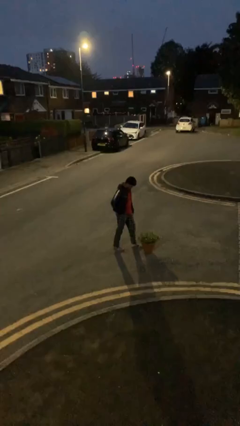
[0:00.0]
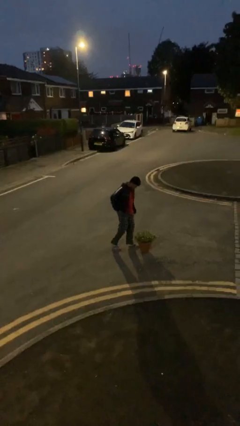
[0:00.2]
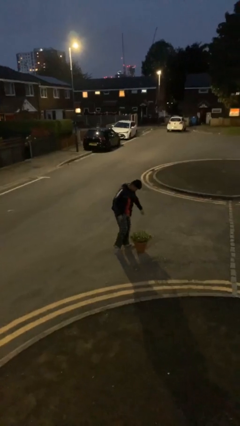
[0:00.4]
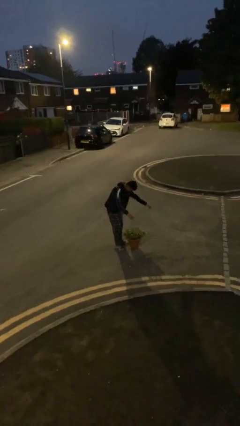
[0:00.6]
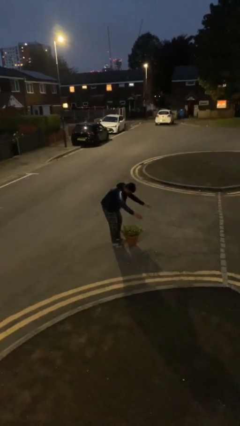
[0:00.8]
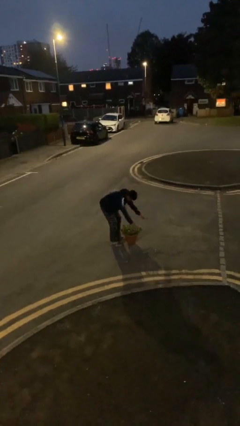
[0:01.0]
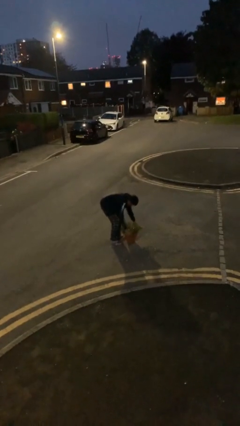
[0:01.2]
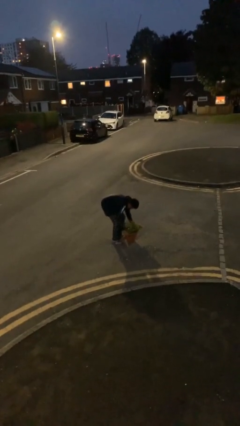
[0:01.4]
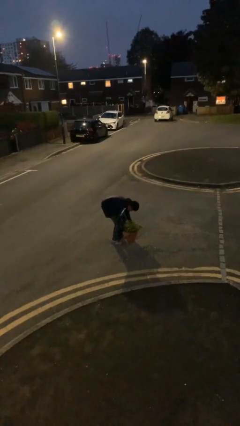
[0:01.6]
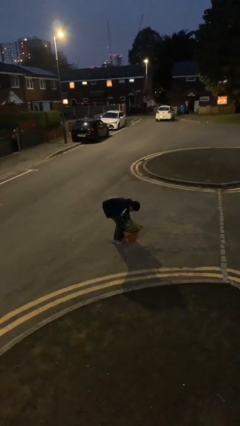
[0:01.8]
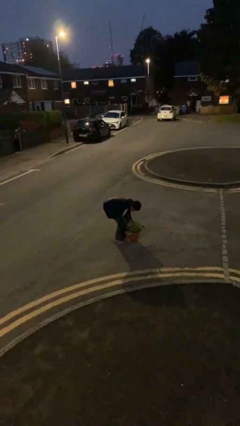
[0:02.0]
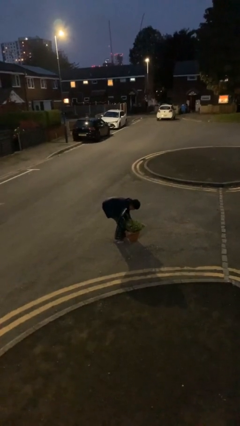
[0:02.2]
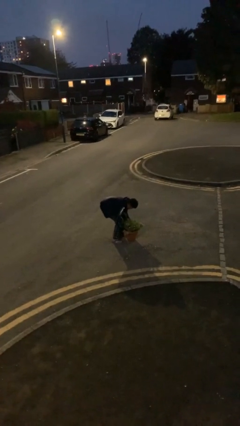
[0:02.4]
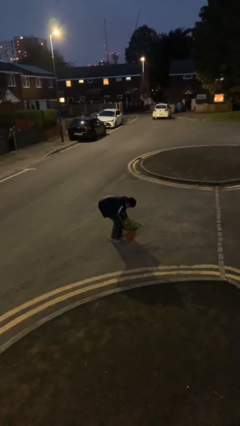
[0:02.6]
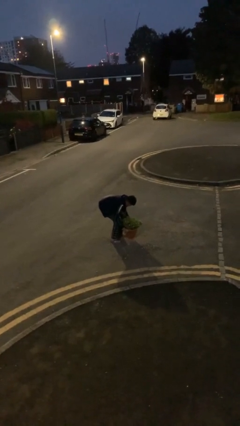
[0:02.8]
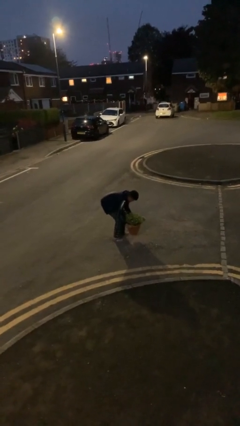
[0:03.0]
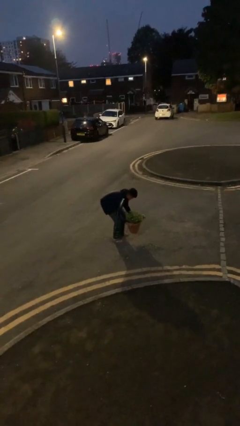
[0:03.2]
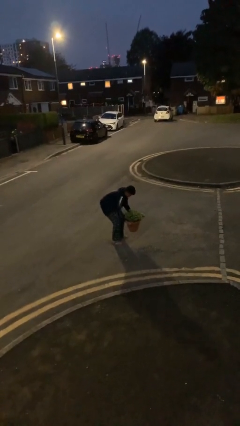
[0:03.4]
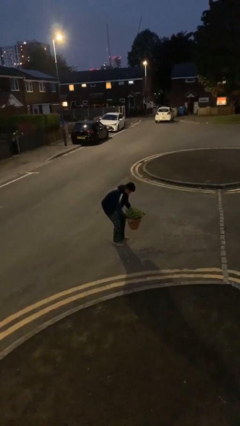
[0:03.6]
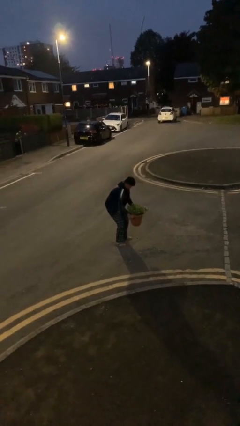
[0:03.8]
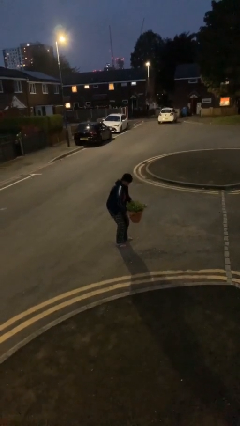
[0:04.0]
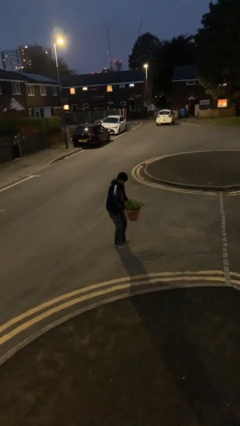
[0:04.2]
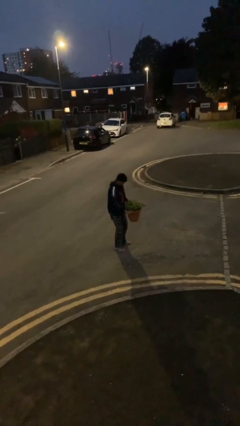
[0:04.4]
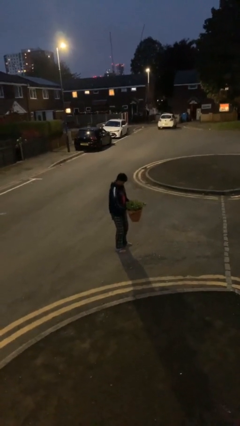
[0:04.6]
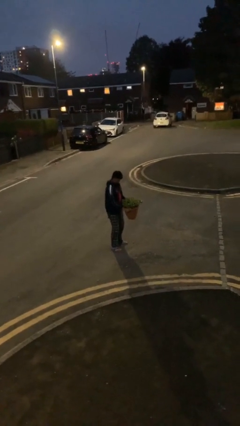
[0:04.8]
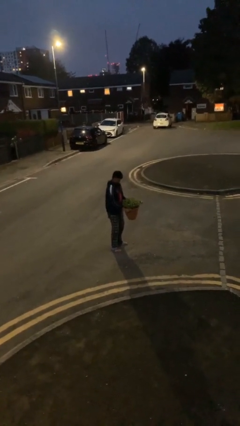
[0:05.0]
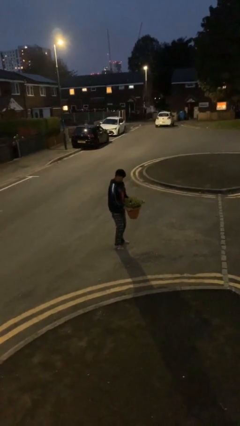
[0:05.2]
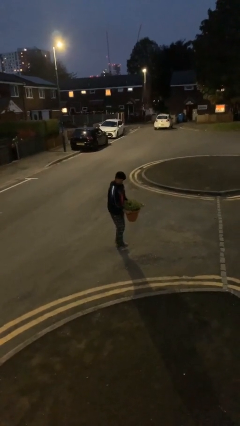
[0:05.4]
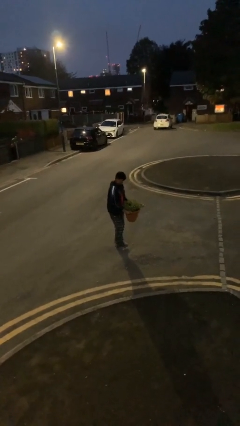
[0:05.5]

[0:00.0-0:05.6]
person picks up object from floor

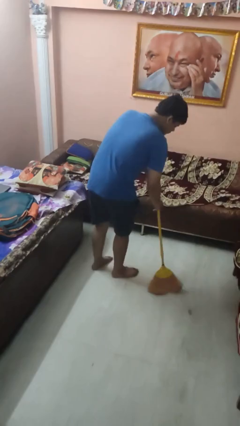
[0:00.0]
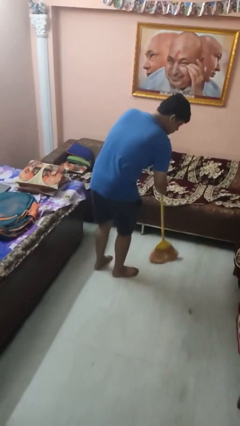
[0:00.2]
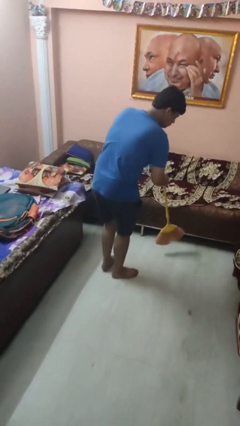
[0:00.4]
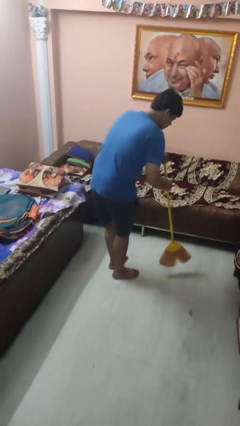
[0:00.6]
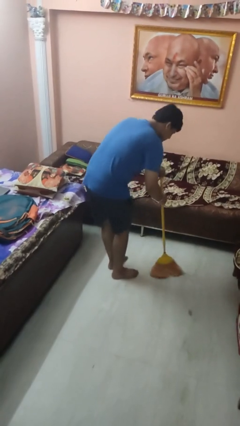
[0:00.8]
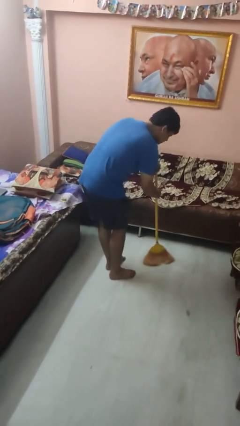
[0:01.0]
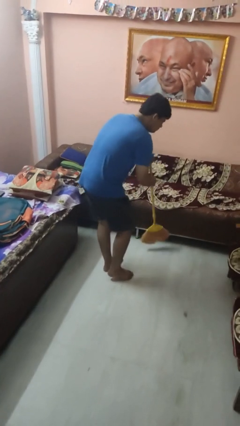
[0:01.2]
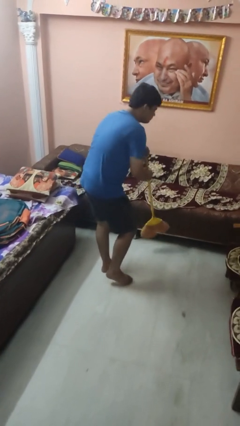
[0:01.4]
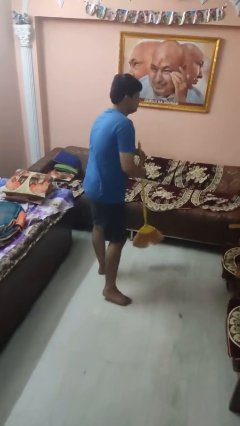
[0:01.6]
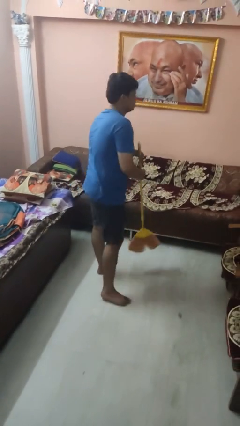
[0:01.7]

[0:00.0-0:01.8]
person sweeps floor

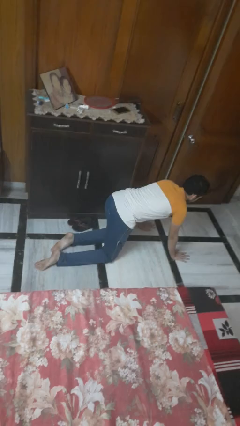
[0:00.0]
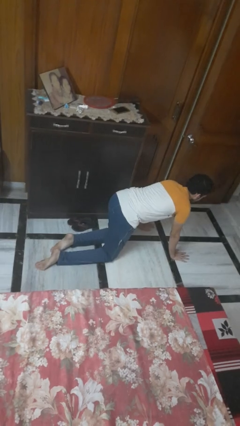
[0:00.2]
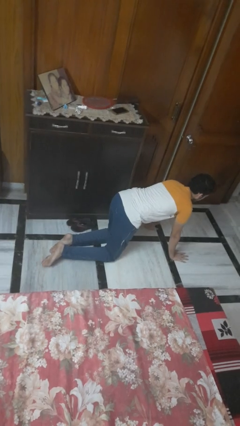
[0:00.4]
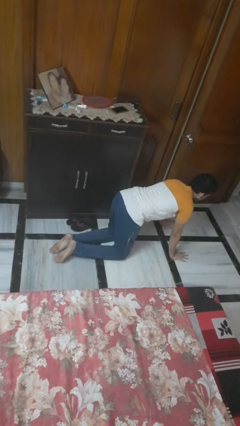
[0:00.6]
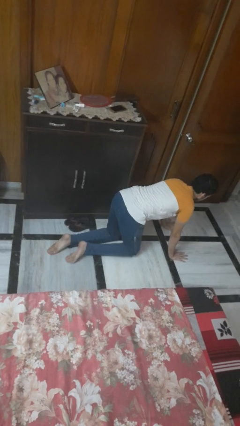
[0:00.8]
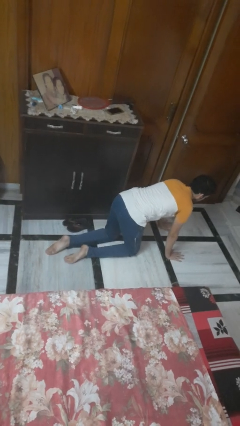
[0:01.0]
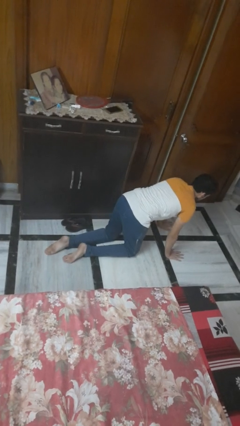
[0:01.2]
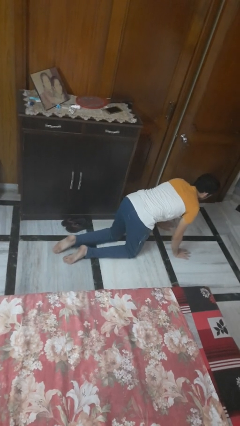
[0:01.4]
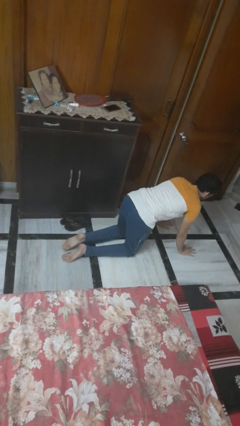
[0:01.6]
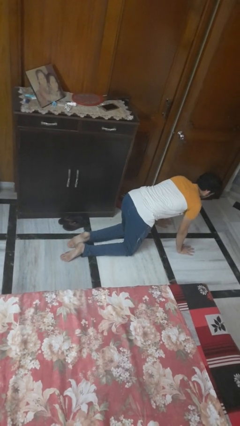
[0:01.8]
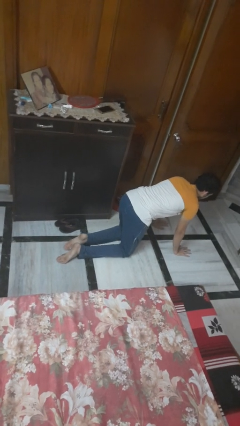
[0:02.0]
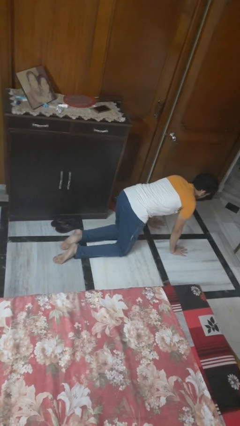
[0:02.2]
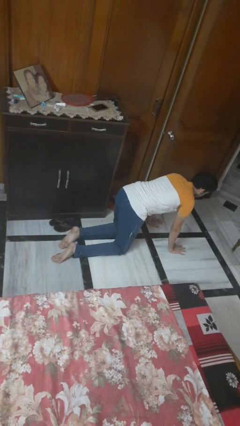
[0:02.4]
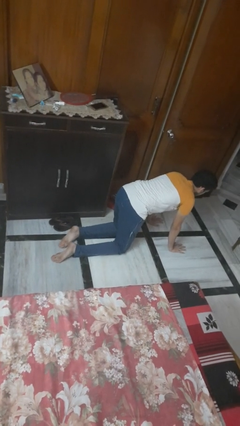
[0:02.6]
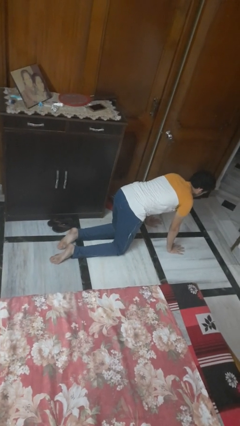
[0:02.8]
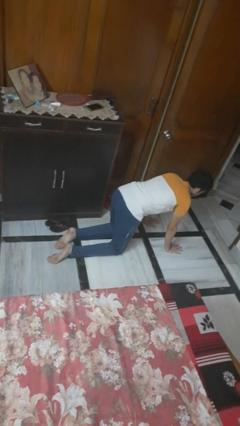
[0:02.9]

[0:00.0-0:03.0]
person crawls

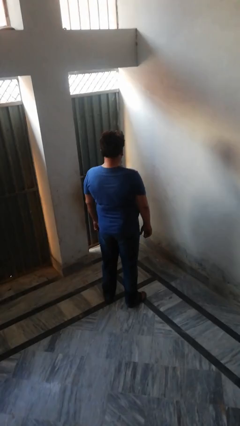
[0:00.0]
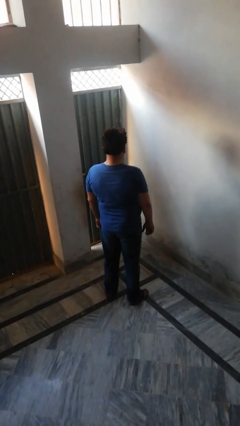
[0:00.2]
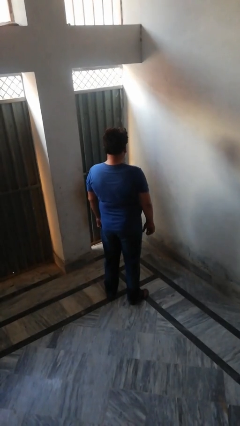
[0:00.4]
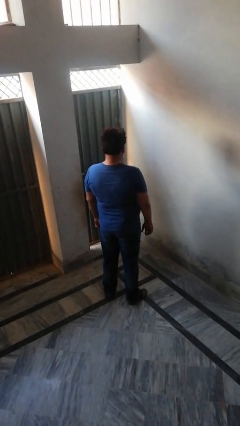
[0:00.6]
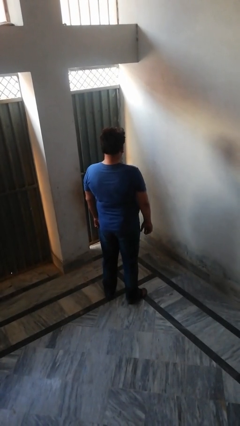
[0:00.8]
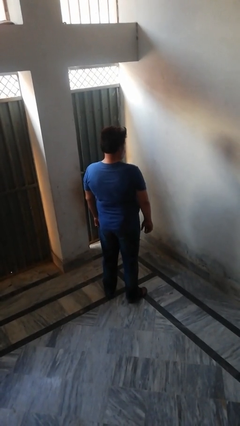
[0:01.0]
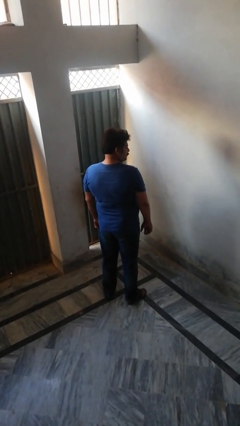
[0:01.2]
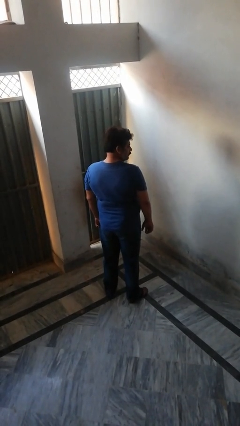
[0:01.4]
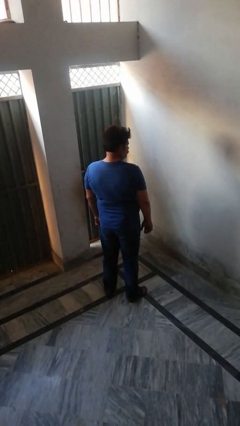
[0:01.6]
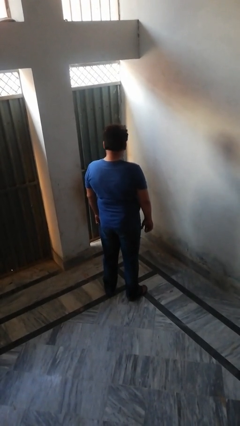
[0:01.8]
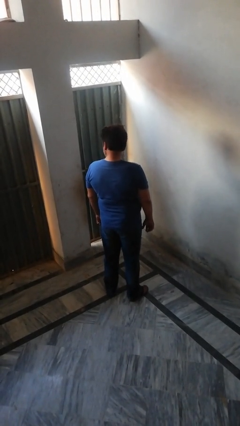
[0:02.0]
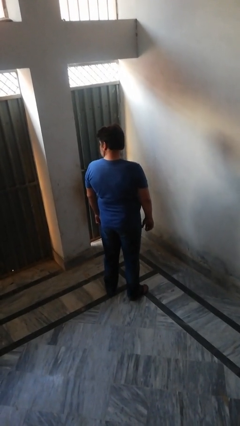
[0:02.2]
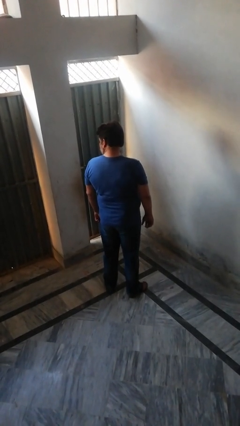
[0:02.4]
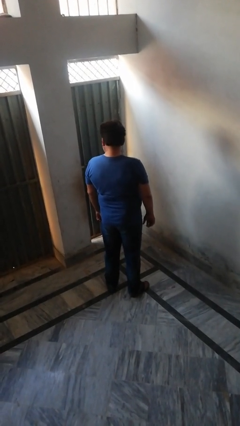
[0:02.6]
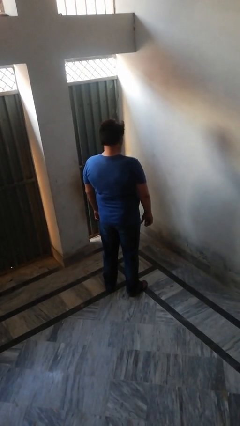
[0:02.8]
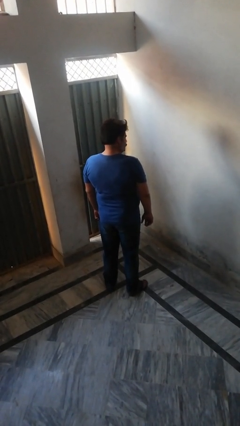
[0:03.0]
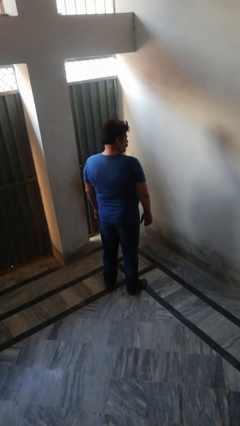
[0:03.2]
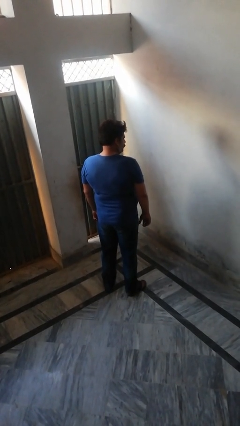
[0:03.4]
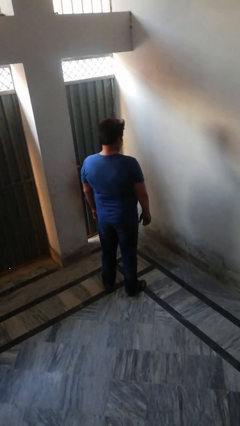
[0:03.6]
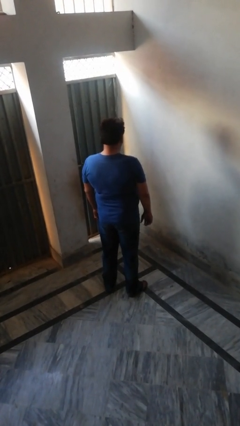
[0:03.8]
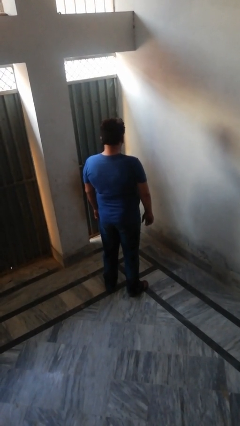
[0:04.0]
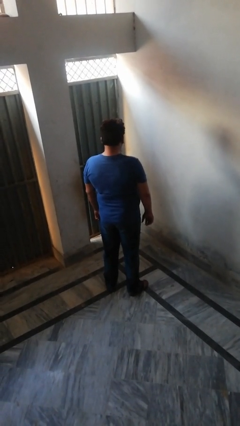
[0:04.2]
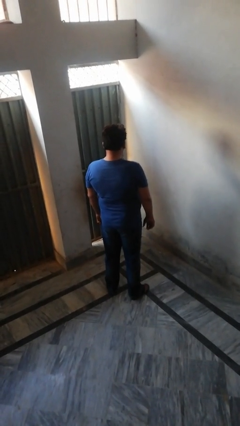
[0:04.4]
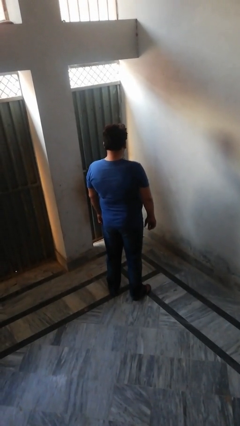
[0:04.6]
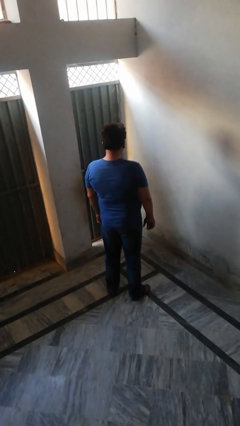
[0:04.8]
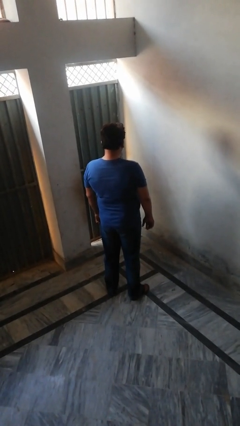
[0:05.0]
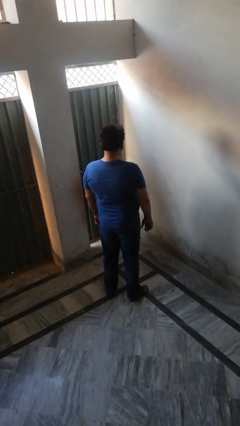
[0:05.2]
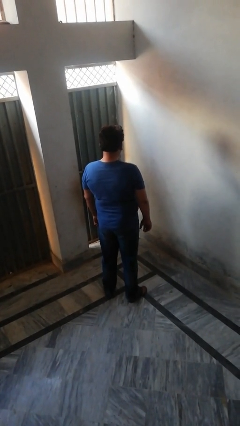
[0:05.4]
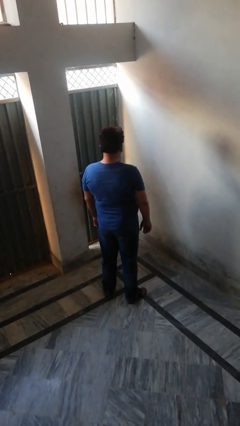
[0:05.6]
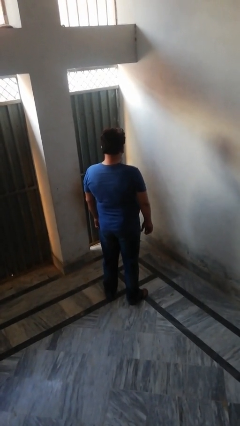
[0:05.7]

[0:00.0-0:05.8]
person shakes head

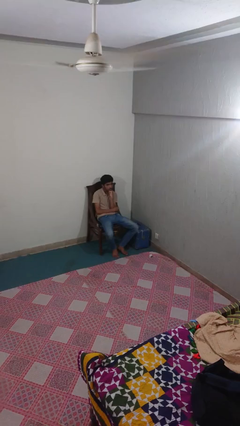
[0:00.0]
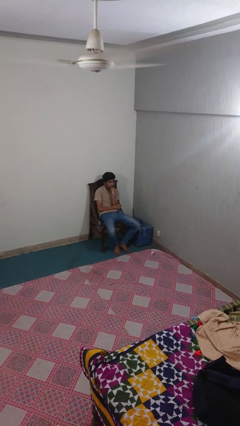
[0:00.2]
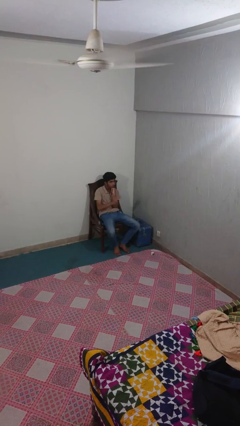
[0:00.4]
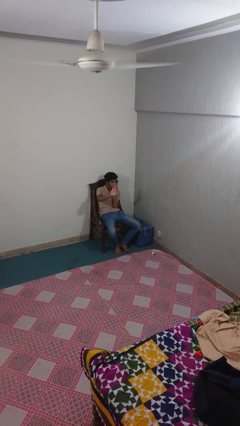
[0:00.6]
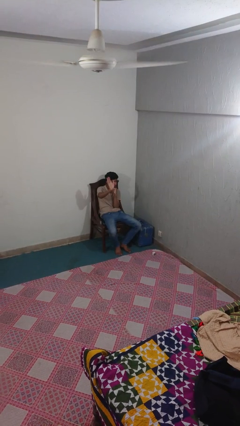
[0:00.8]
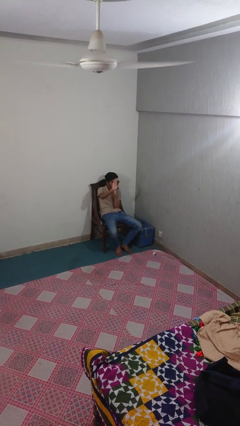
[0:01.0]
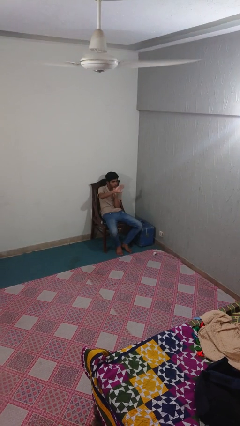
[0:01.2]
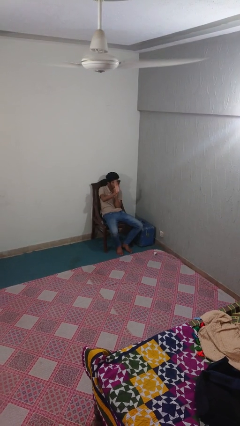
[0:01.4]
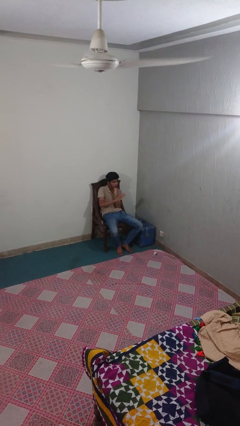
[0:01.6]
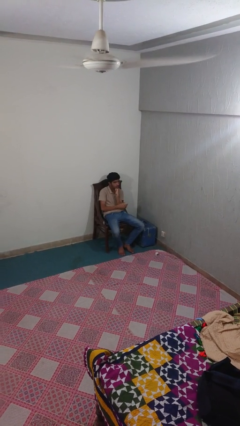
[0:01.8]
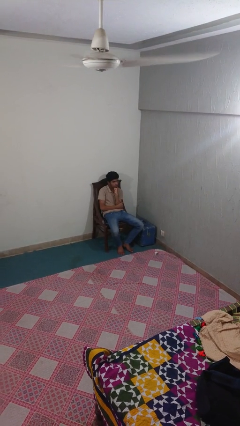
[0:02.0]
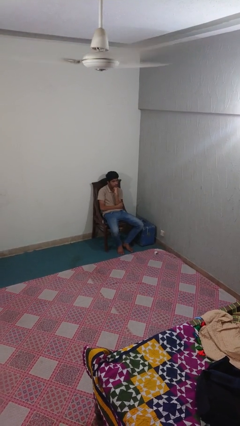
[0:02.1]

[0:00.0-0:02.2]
person waves at person
